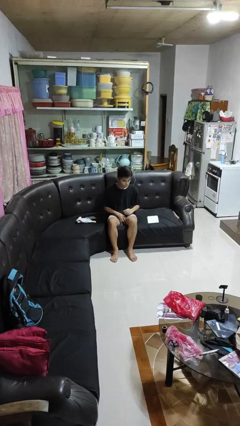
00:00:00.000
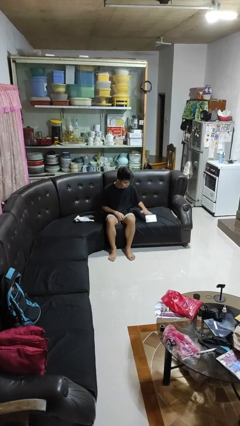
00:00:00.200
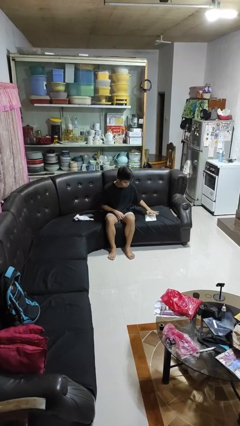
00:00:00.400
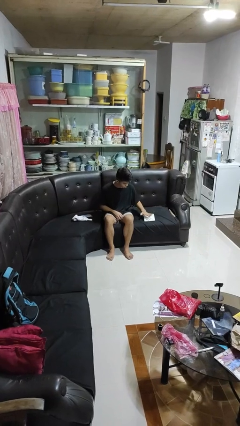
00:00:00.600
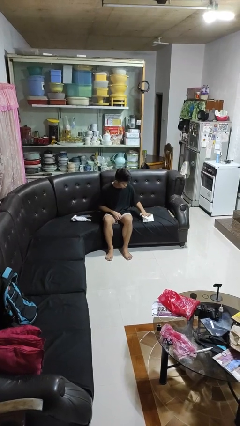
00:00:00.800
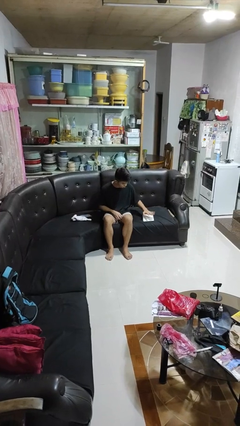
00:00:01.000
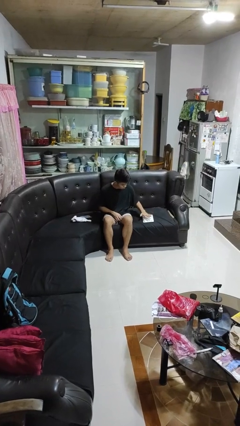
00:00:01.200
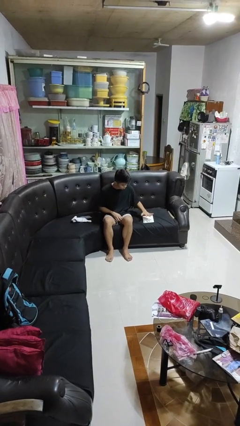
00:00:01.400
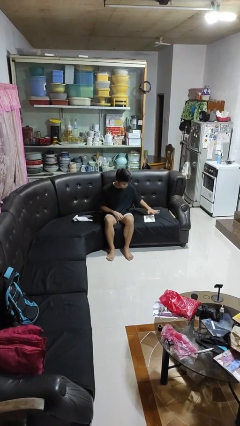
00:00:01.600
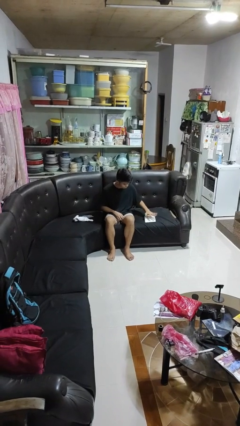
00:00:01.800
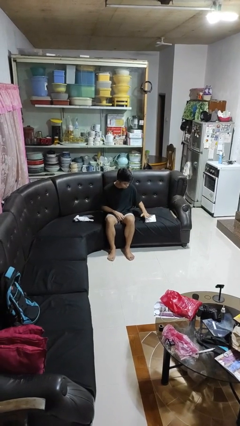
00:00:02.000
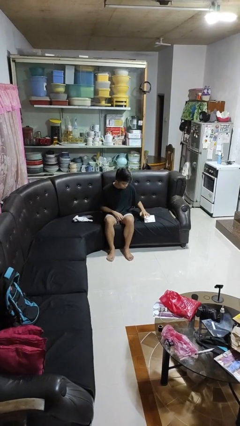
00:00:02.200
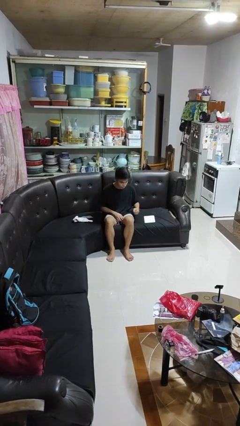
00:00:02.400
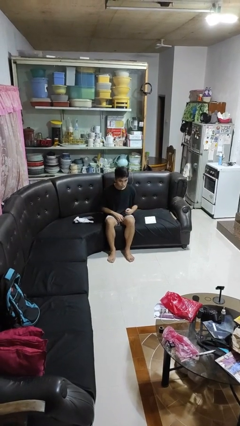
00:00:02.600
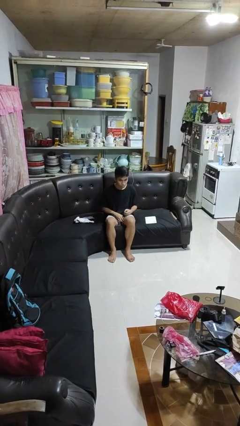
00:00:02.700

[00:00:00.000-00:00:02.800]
person waves hand over object

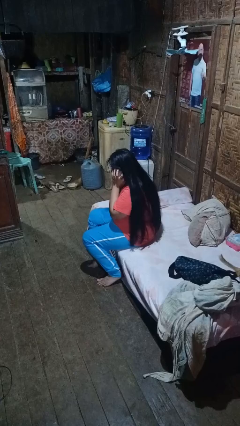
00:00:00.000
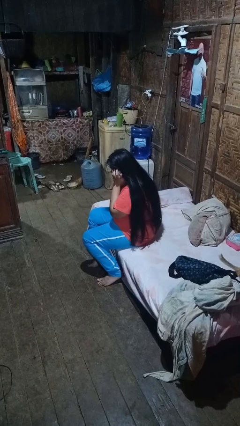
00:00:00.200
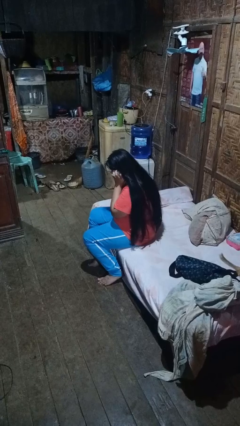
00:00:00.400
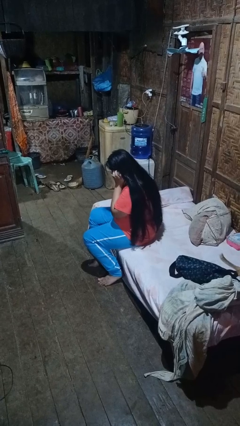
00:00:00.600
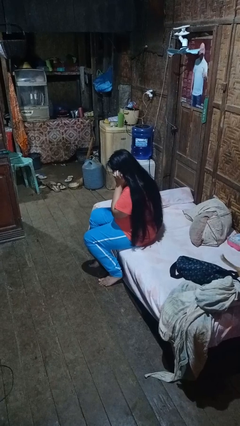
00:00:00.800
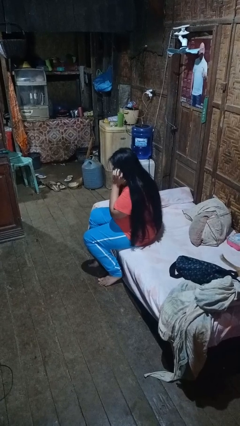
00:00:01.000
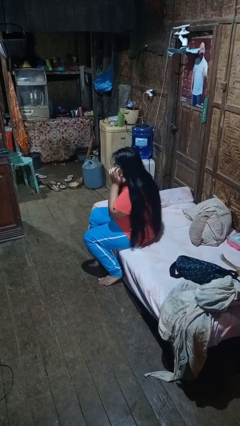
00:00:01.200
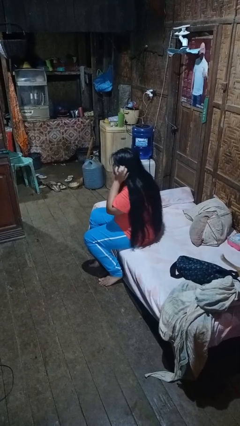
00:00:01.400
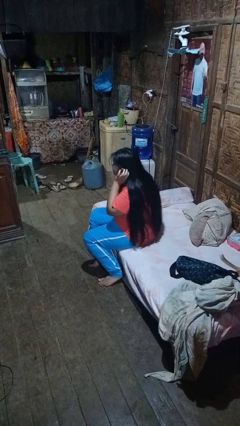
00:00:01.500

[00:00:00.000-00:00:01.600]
person puts fingers in ear

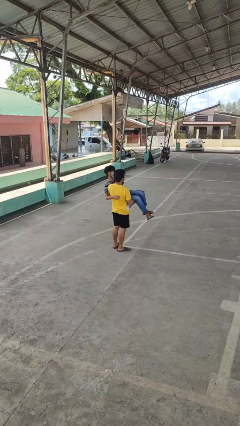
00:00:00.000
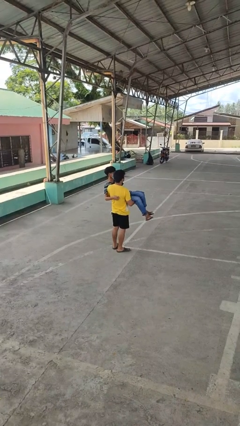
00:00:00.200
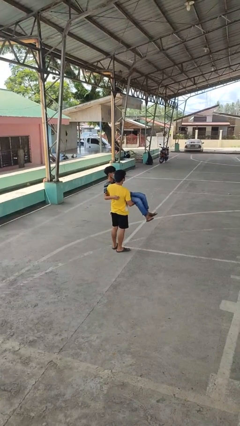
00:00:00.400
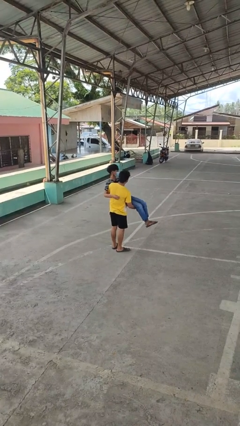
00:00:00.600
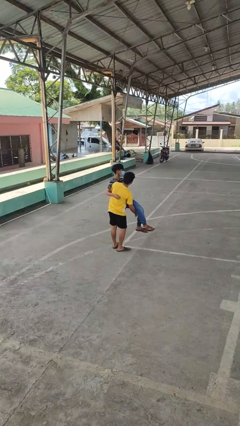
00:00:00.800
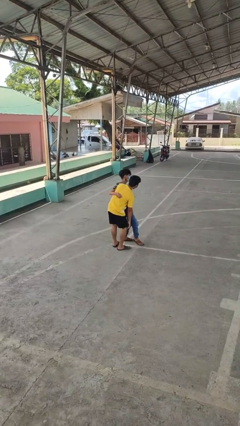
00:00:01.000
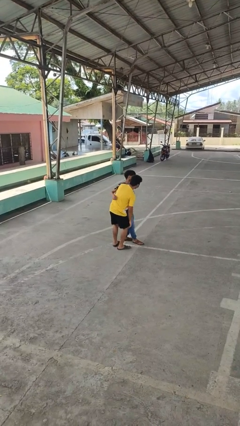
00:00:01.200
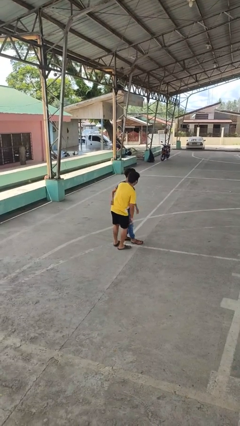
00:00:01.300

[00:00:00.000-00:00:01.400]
person puts down person

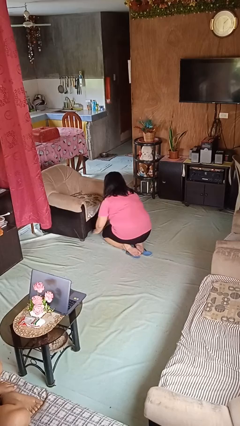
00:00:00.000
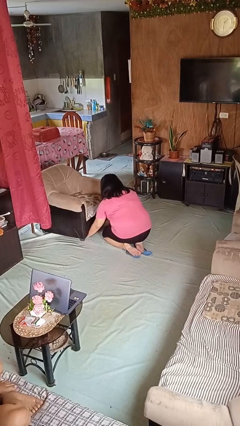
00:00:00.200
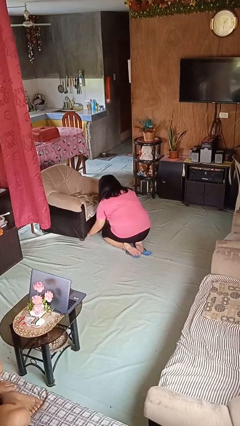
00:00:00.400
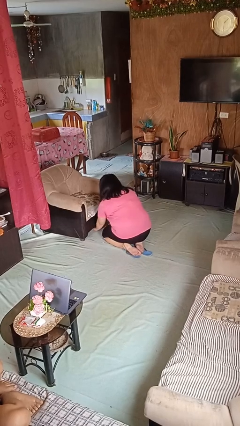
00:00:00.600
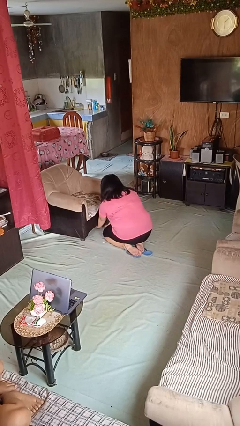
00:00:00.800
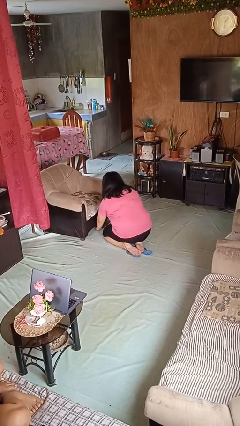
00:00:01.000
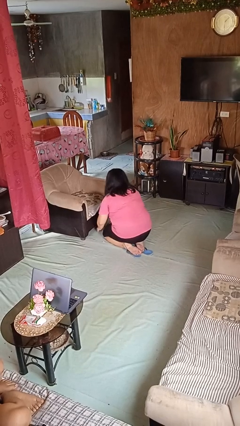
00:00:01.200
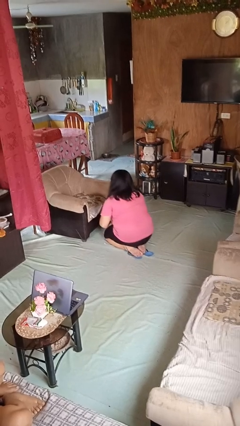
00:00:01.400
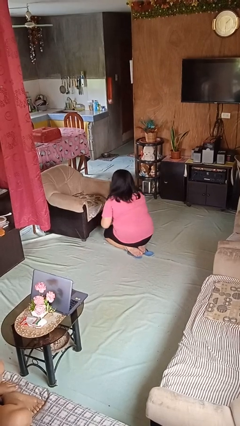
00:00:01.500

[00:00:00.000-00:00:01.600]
person searches under couch

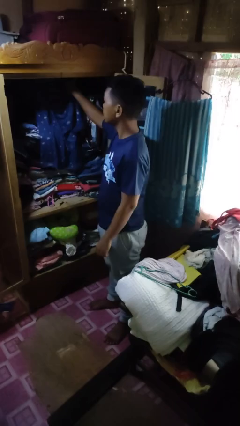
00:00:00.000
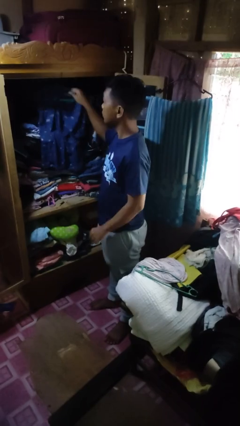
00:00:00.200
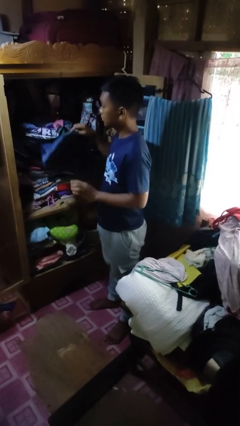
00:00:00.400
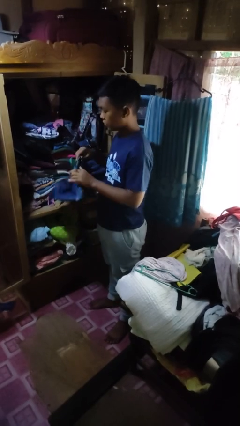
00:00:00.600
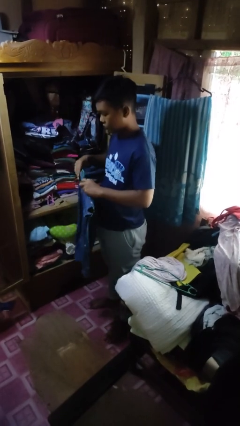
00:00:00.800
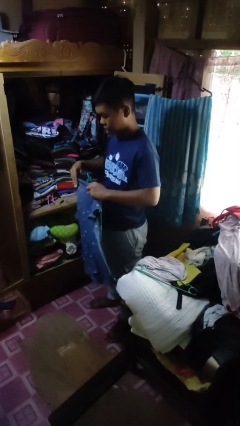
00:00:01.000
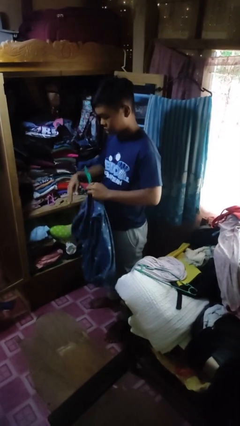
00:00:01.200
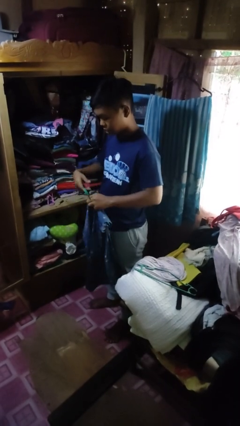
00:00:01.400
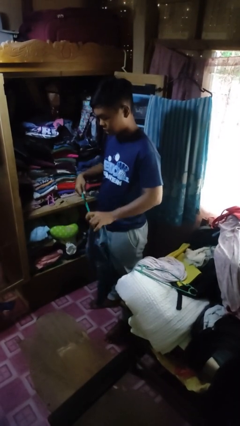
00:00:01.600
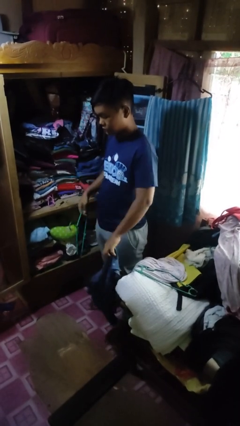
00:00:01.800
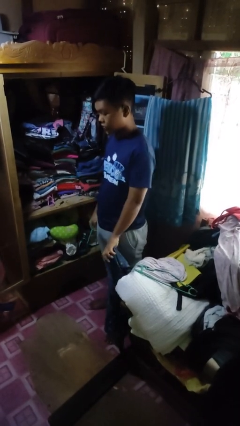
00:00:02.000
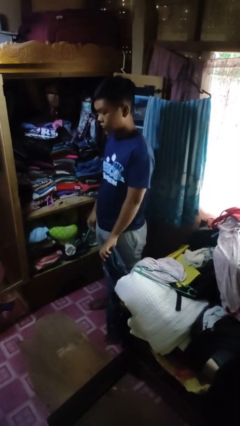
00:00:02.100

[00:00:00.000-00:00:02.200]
person takes clothes from closet

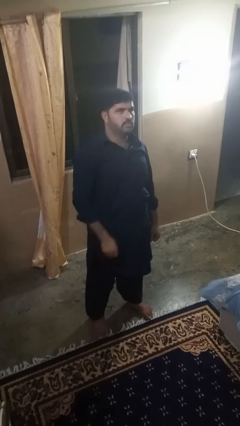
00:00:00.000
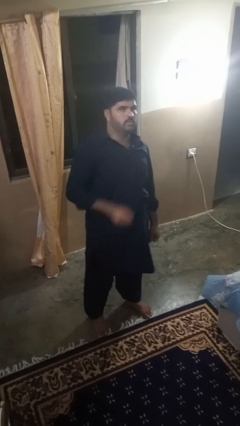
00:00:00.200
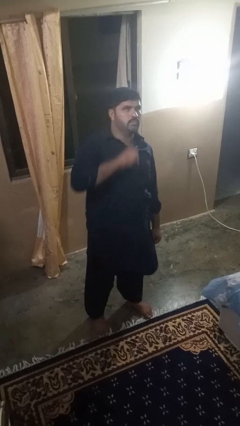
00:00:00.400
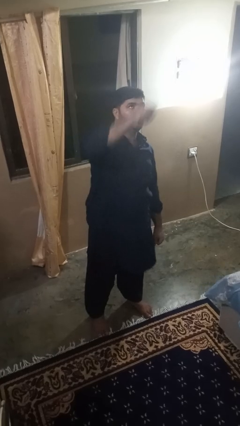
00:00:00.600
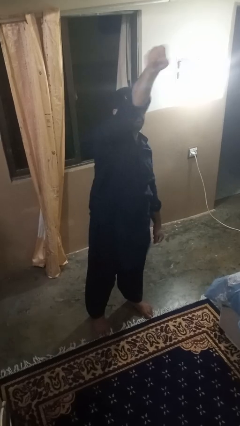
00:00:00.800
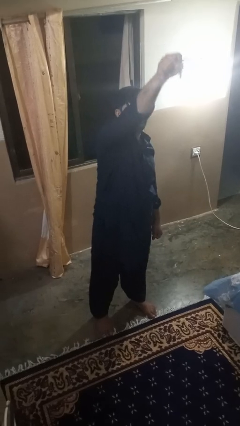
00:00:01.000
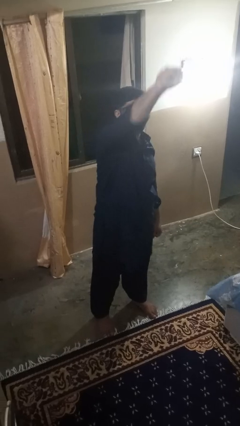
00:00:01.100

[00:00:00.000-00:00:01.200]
person punches

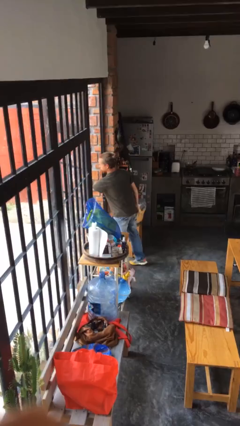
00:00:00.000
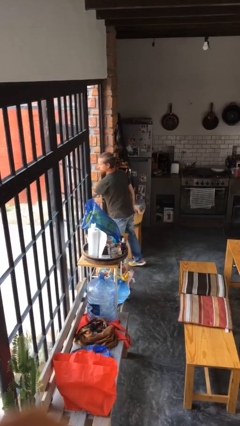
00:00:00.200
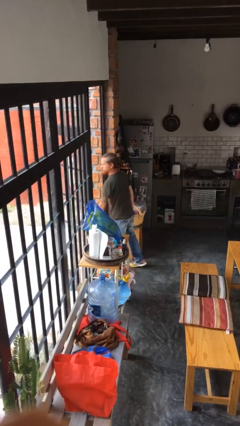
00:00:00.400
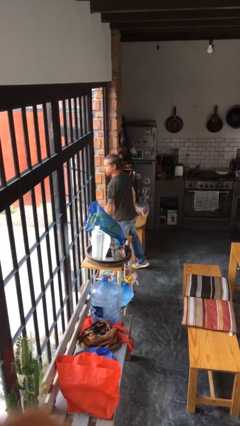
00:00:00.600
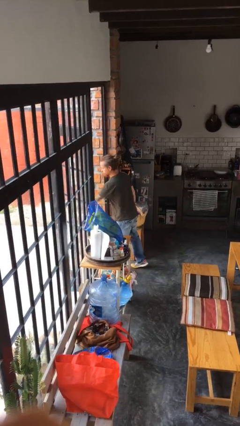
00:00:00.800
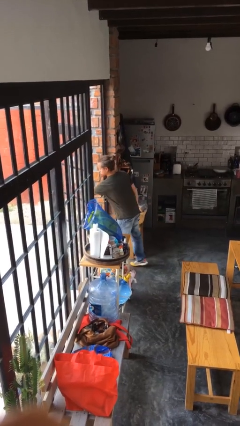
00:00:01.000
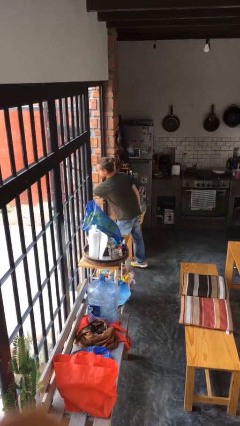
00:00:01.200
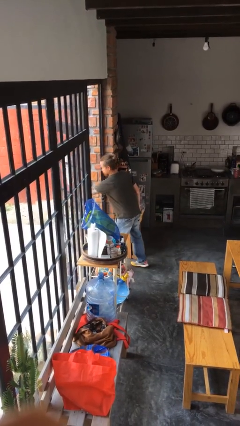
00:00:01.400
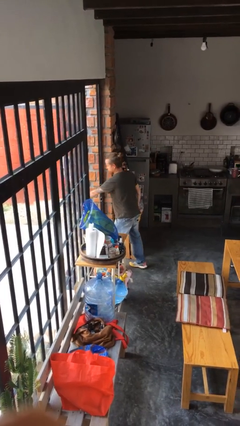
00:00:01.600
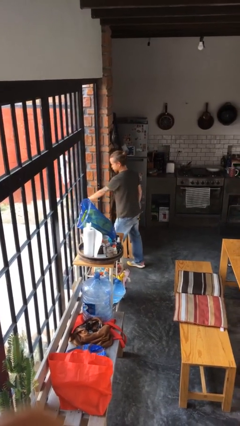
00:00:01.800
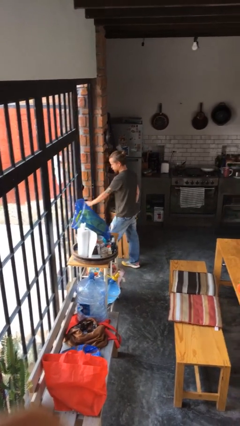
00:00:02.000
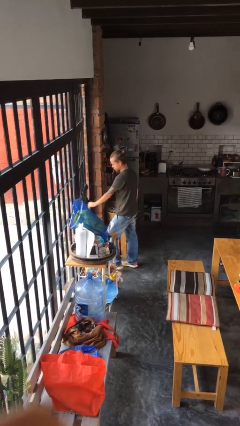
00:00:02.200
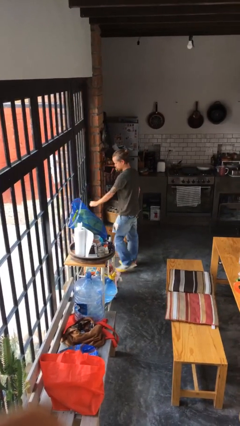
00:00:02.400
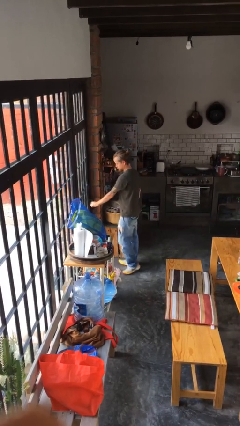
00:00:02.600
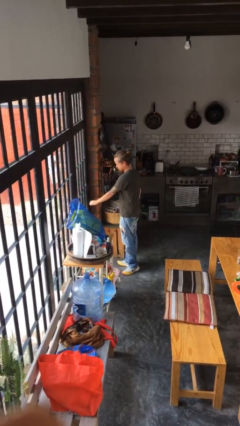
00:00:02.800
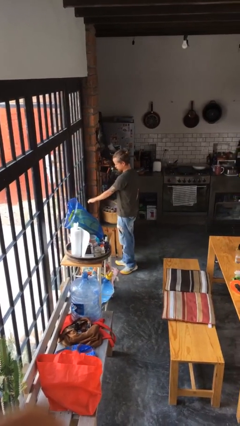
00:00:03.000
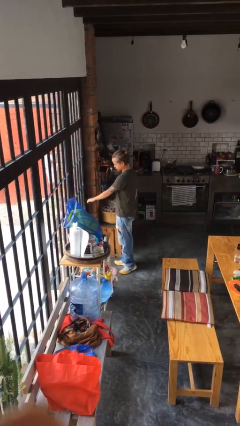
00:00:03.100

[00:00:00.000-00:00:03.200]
person closes facility door

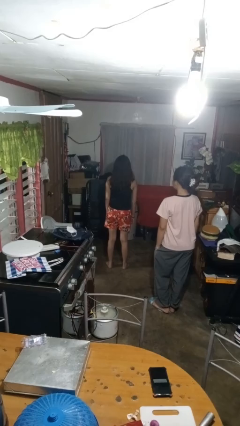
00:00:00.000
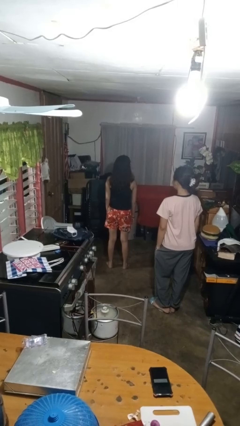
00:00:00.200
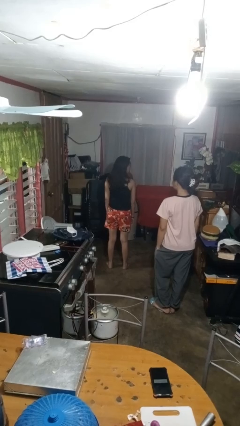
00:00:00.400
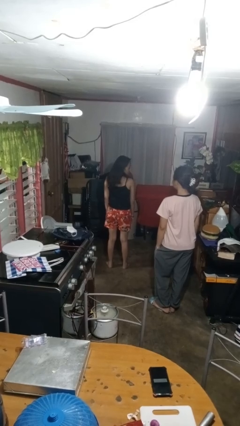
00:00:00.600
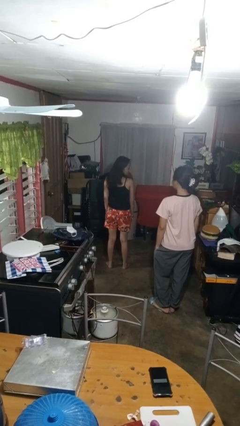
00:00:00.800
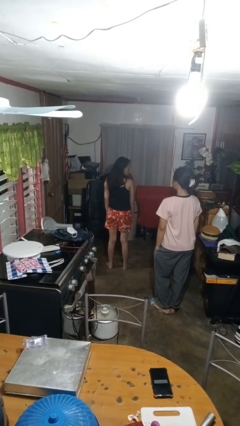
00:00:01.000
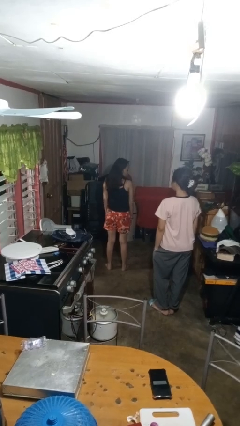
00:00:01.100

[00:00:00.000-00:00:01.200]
person looks over shoulder

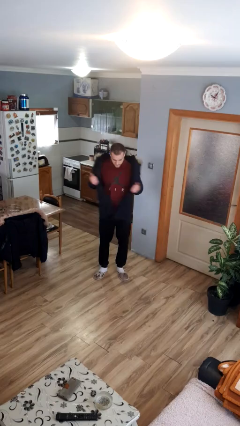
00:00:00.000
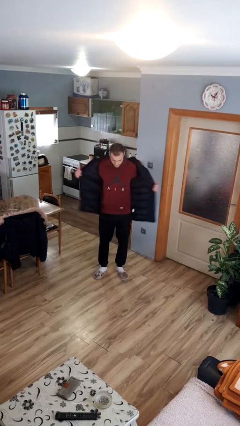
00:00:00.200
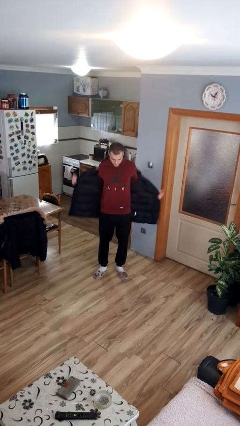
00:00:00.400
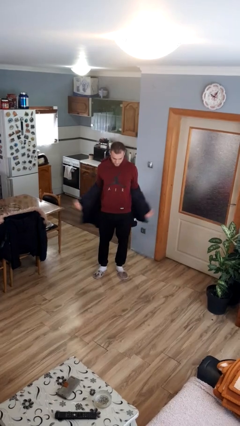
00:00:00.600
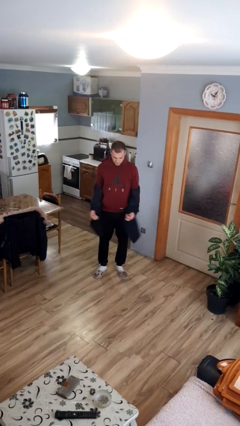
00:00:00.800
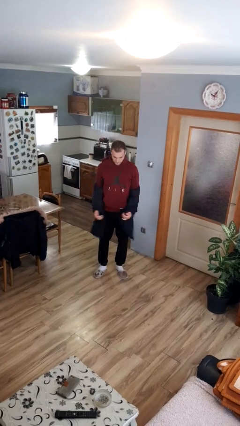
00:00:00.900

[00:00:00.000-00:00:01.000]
person takes off jacket

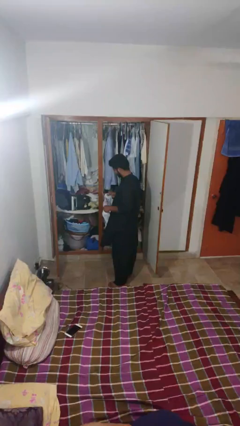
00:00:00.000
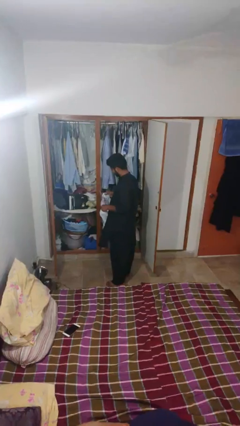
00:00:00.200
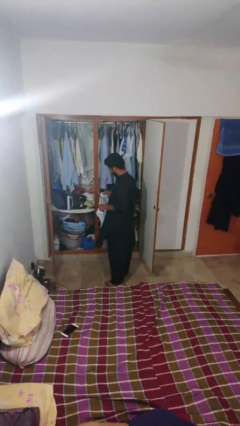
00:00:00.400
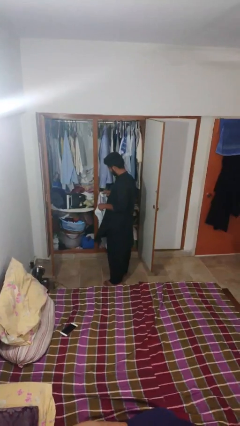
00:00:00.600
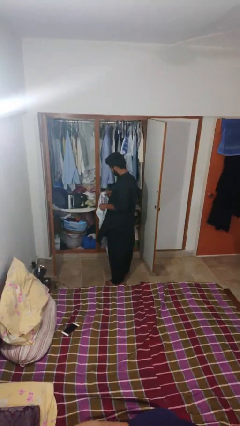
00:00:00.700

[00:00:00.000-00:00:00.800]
person puts clothes into closet
